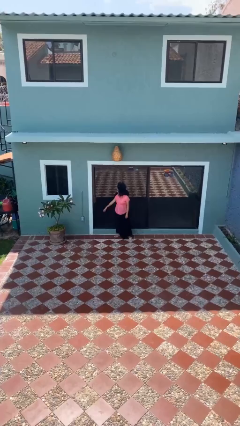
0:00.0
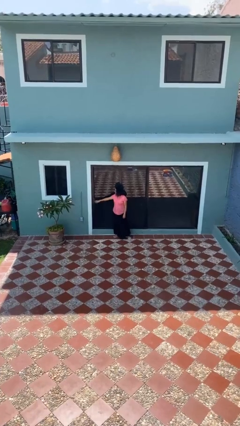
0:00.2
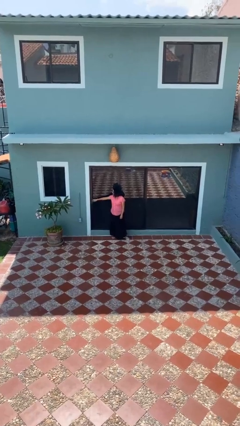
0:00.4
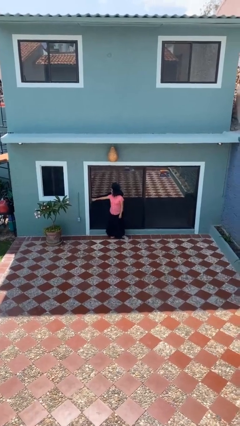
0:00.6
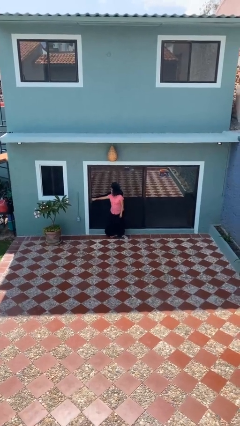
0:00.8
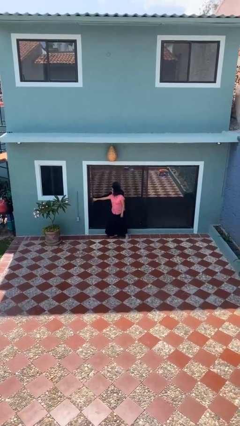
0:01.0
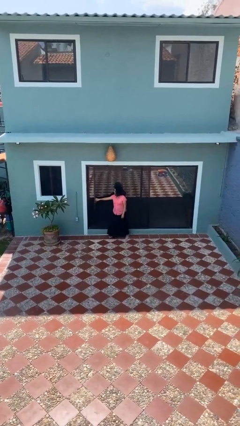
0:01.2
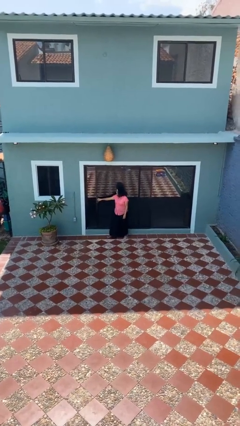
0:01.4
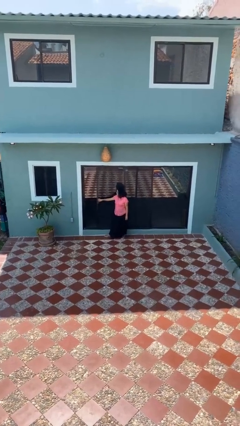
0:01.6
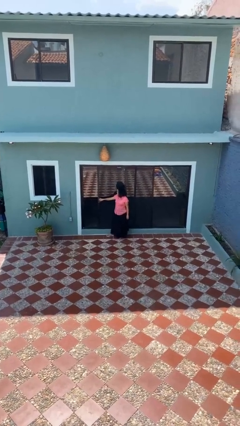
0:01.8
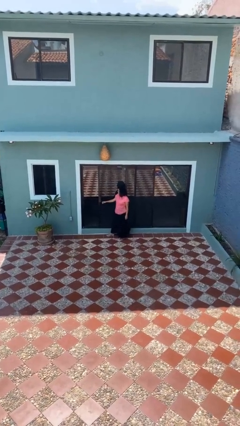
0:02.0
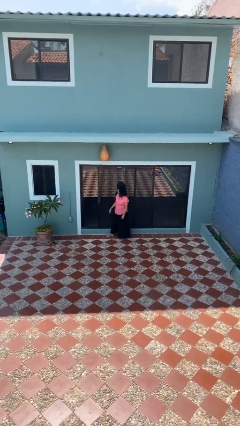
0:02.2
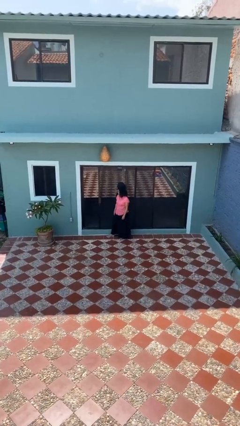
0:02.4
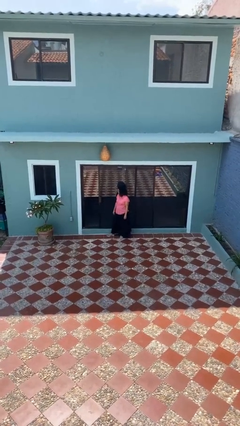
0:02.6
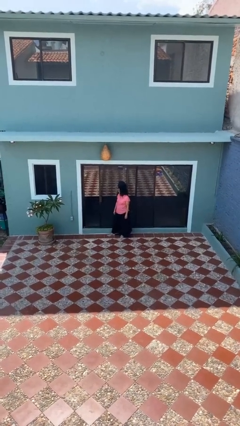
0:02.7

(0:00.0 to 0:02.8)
person opens sliding door

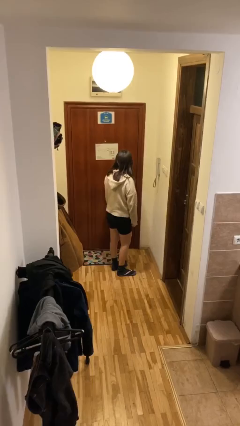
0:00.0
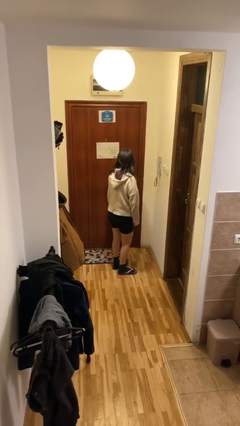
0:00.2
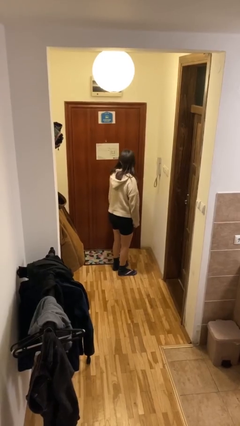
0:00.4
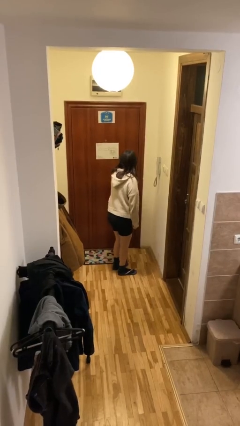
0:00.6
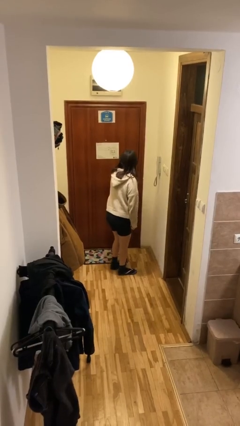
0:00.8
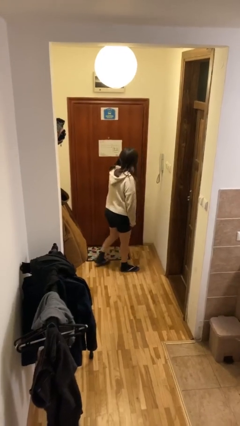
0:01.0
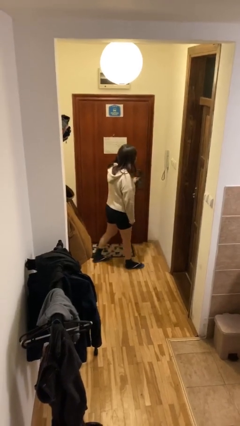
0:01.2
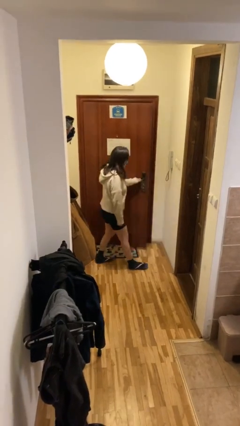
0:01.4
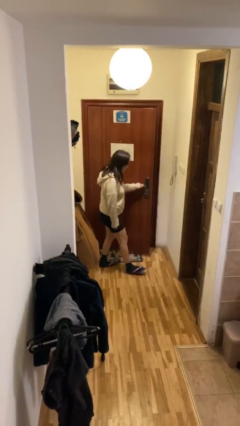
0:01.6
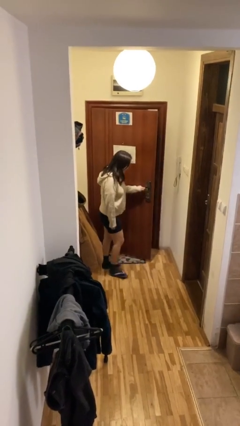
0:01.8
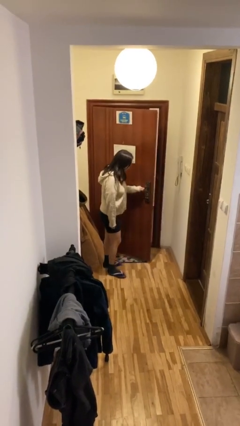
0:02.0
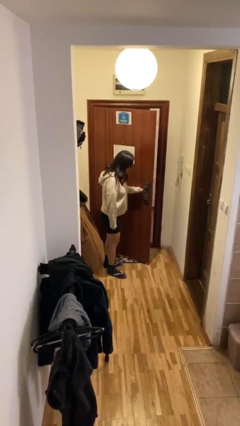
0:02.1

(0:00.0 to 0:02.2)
person closes facility door

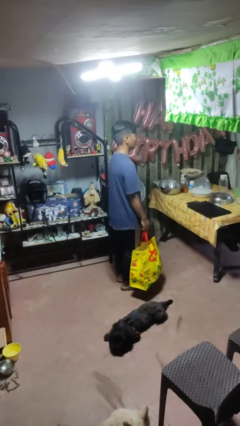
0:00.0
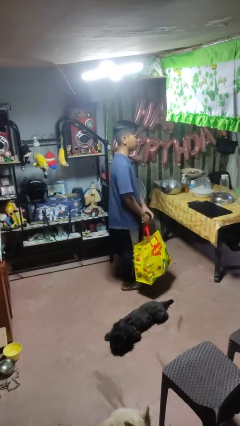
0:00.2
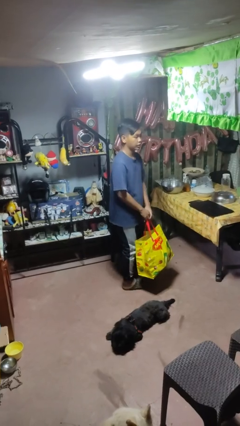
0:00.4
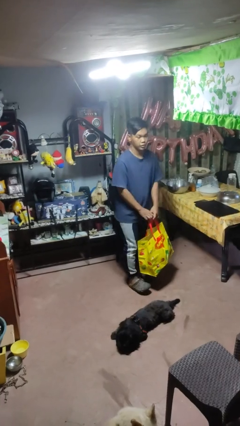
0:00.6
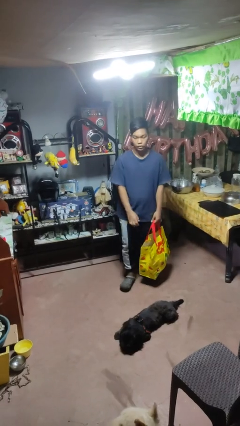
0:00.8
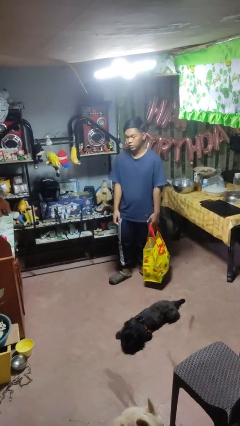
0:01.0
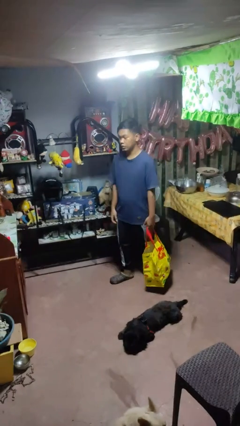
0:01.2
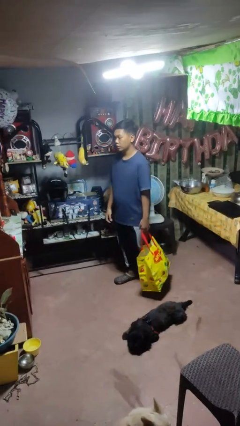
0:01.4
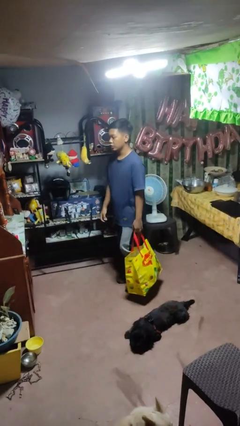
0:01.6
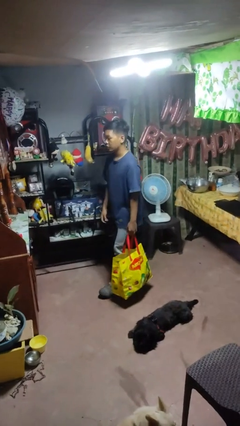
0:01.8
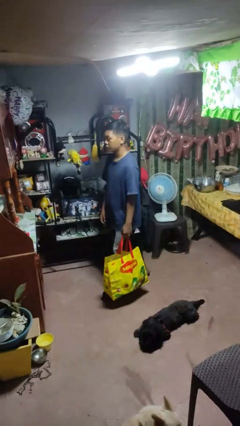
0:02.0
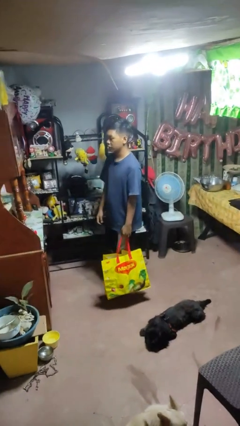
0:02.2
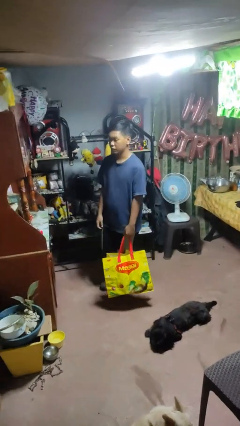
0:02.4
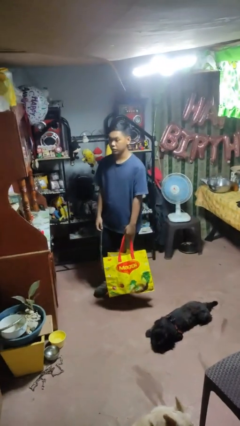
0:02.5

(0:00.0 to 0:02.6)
person carries groceries

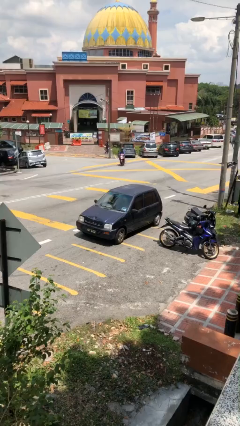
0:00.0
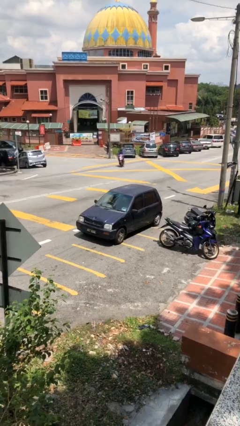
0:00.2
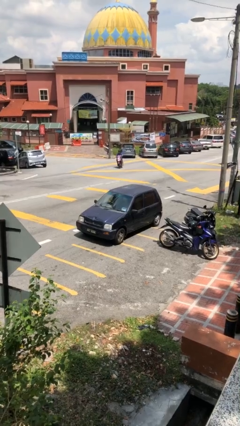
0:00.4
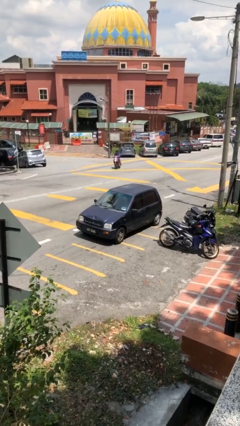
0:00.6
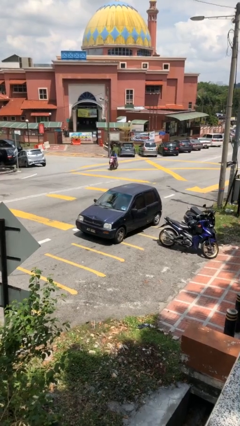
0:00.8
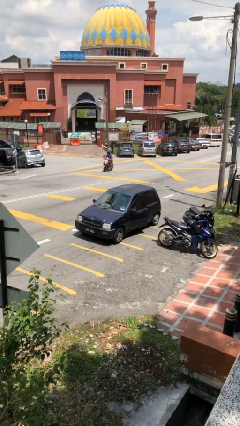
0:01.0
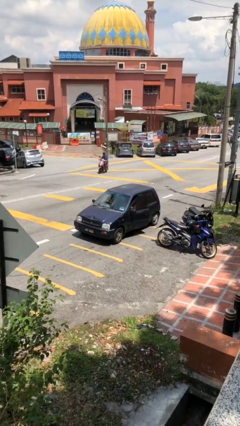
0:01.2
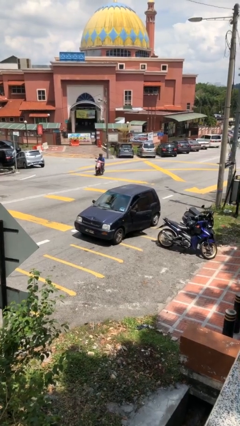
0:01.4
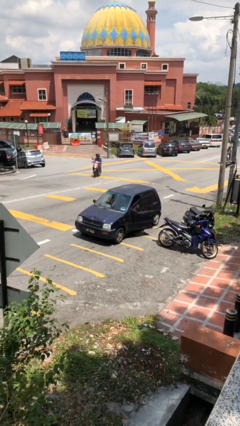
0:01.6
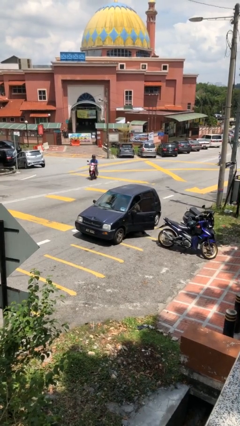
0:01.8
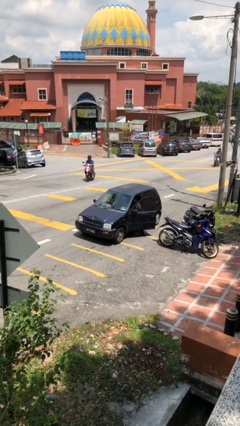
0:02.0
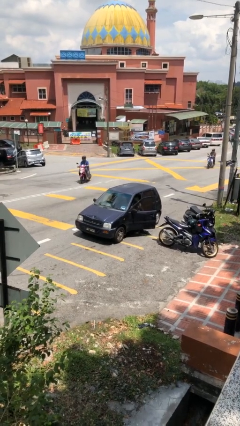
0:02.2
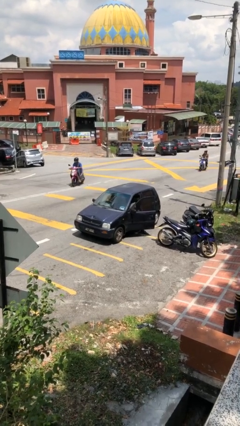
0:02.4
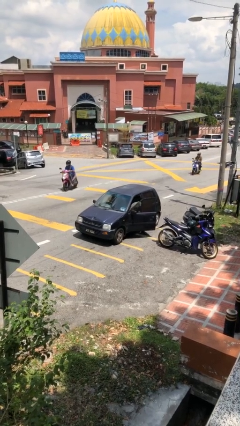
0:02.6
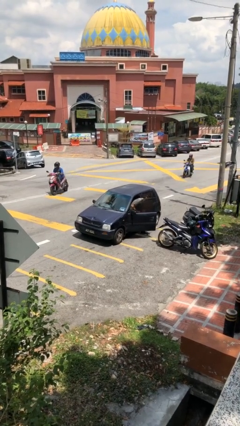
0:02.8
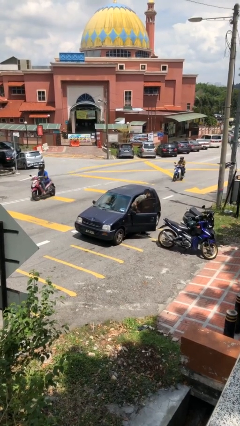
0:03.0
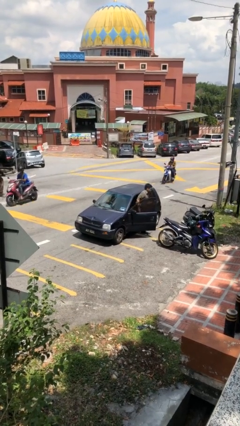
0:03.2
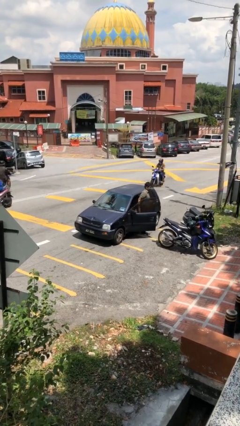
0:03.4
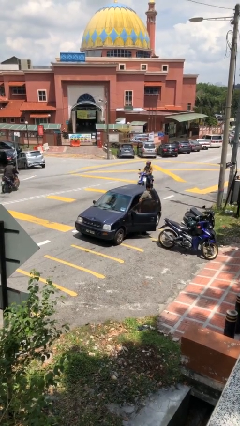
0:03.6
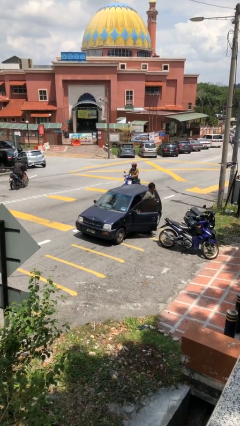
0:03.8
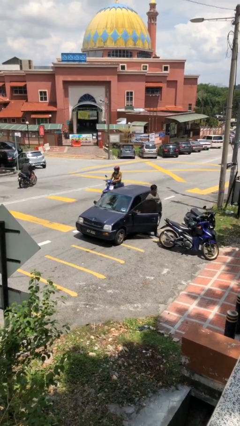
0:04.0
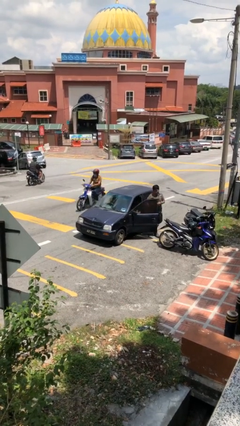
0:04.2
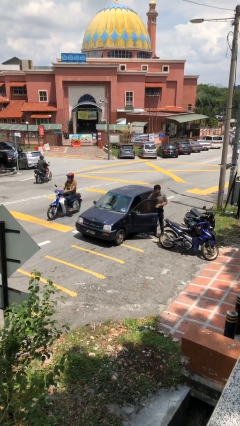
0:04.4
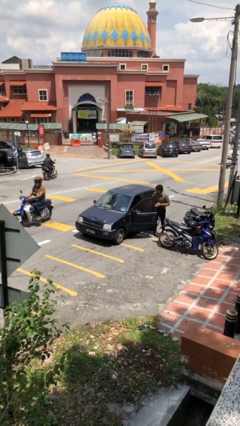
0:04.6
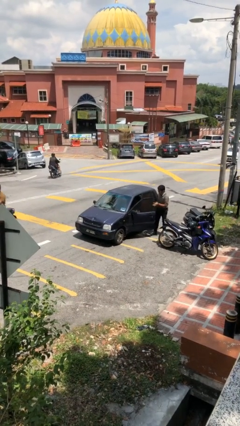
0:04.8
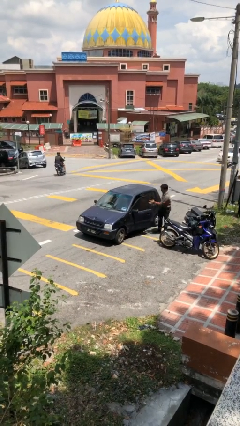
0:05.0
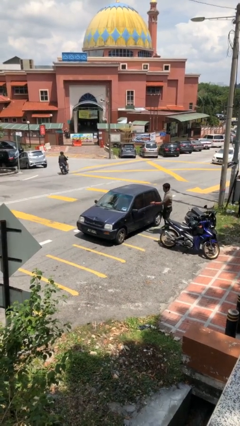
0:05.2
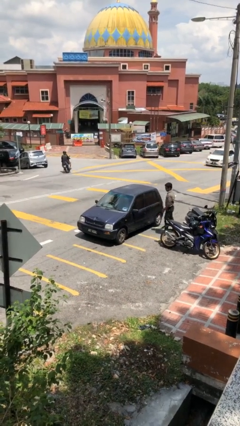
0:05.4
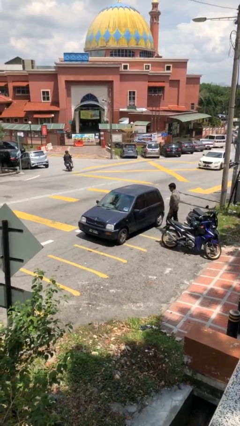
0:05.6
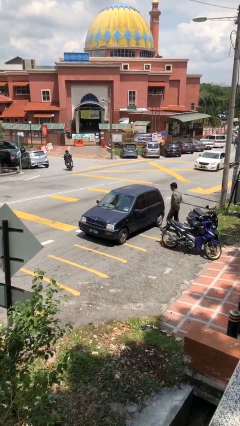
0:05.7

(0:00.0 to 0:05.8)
car drops off person

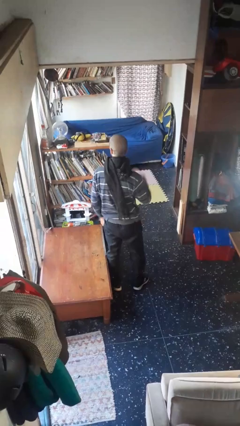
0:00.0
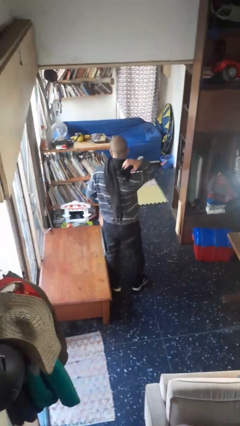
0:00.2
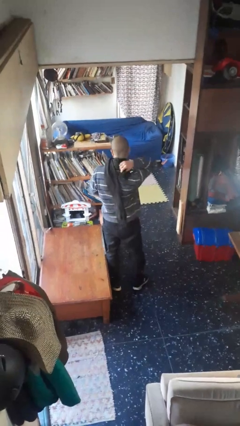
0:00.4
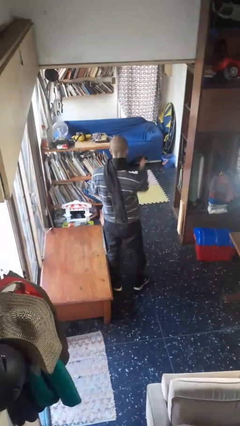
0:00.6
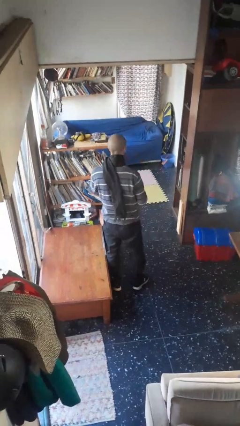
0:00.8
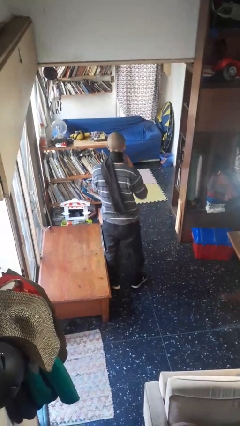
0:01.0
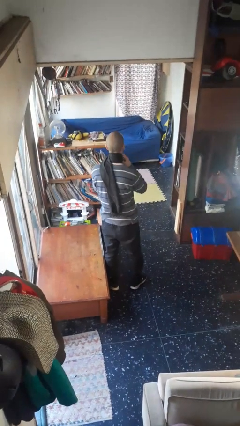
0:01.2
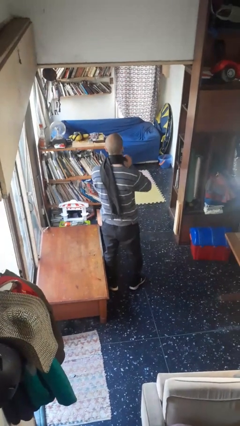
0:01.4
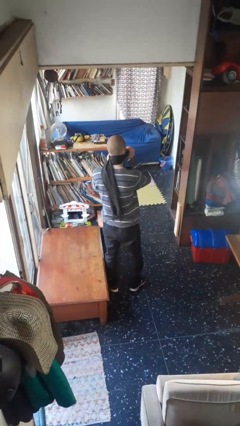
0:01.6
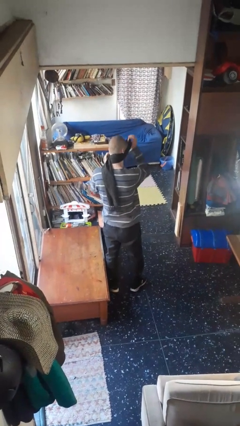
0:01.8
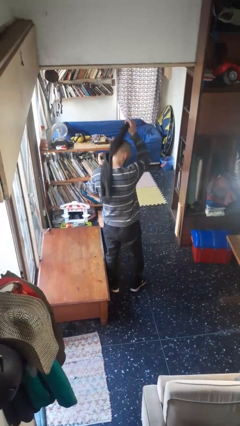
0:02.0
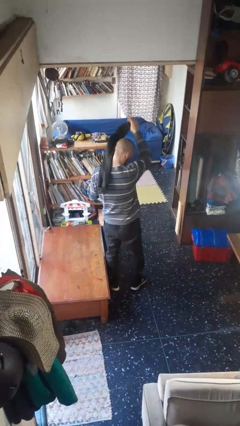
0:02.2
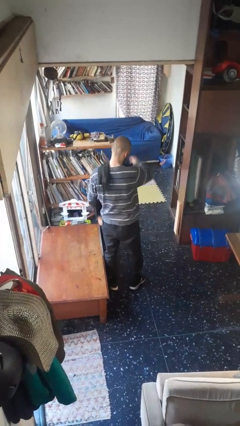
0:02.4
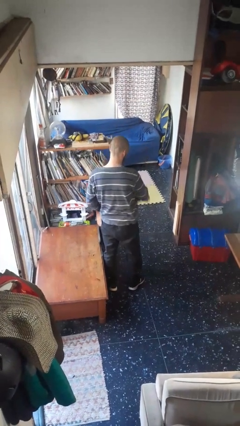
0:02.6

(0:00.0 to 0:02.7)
person takes off scarf

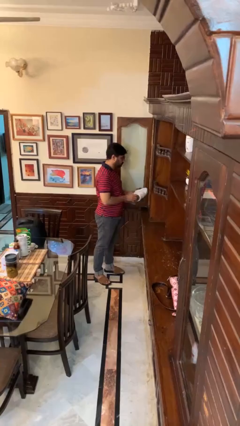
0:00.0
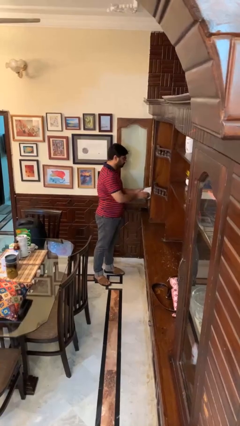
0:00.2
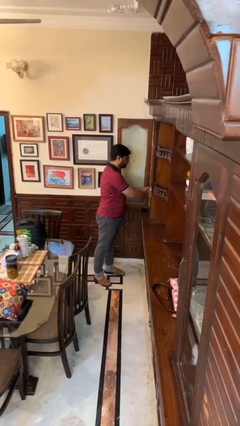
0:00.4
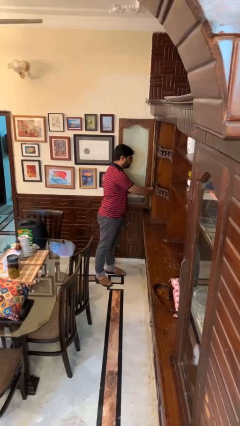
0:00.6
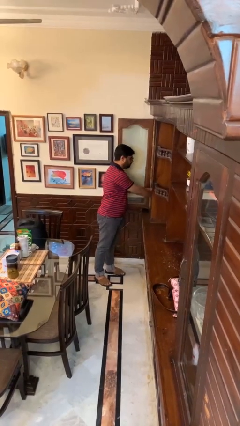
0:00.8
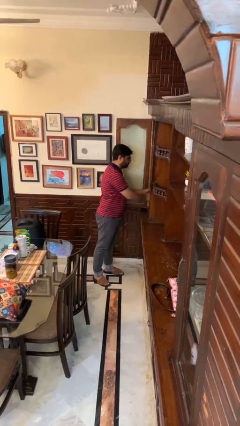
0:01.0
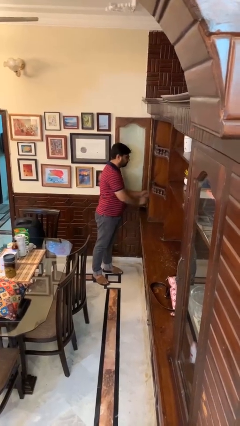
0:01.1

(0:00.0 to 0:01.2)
person puts clothes into dresser
